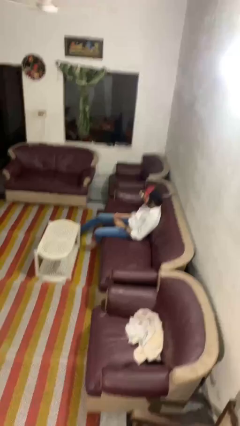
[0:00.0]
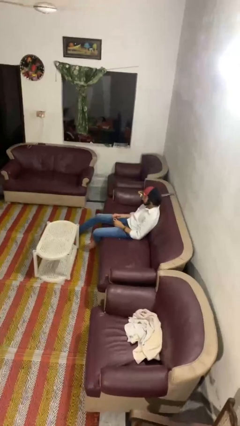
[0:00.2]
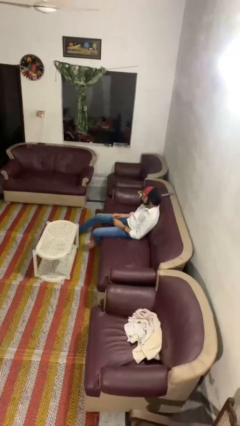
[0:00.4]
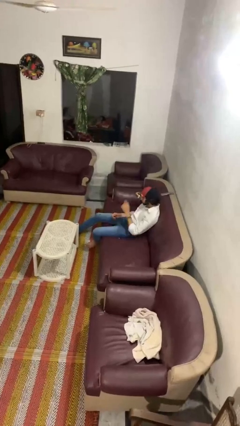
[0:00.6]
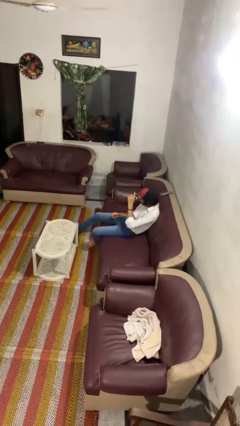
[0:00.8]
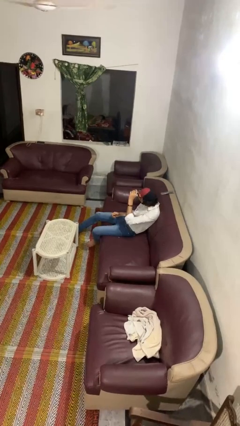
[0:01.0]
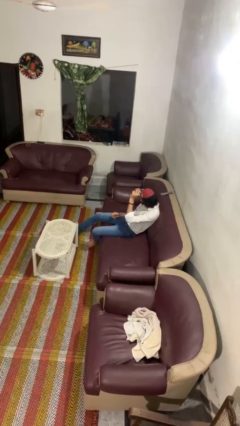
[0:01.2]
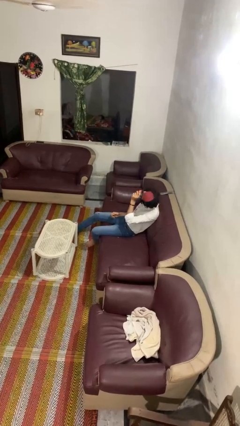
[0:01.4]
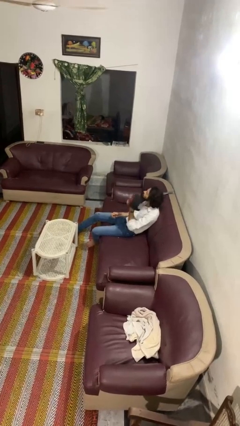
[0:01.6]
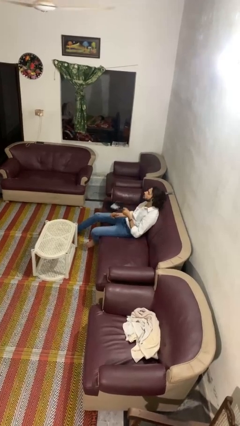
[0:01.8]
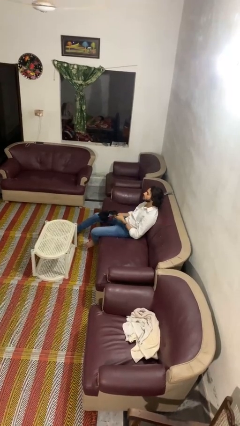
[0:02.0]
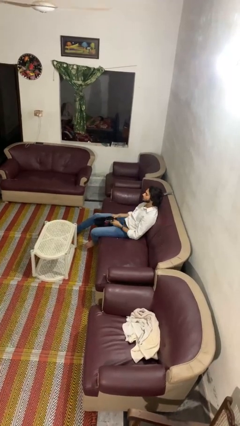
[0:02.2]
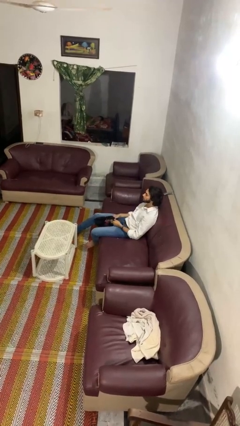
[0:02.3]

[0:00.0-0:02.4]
person takes off hat

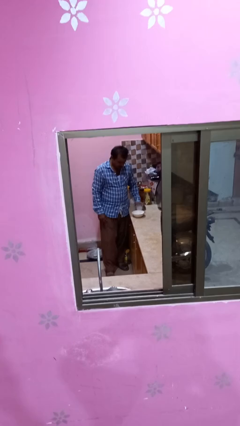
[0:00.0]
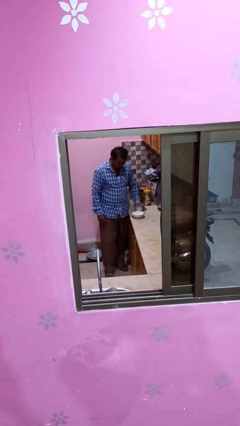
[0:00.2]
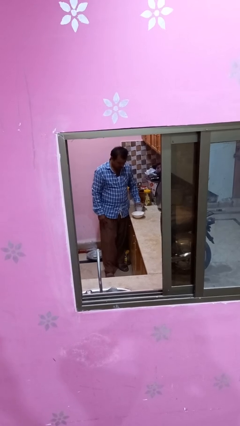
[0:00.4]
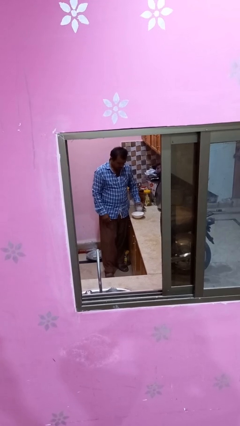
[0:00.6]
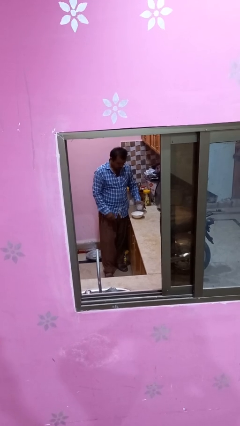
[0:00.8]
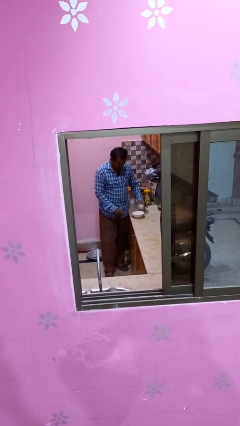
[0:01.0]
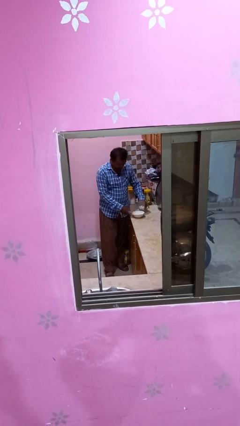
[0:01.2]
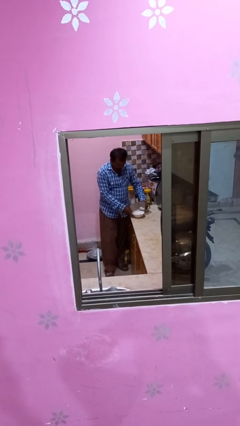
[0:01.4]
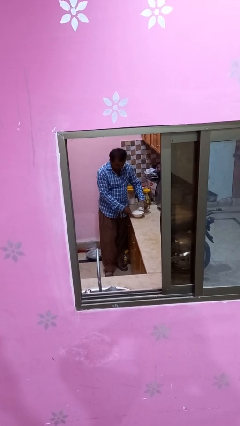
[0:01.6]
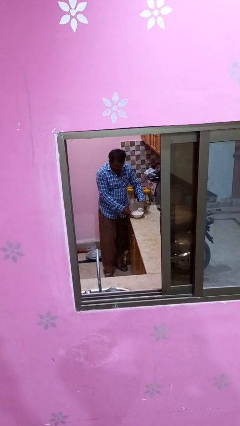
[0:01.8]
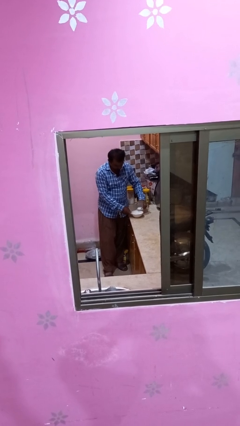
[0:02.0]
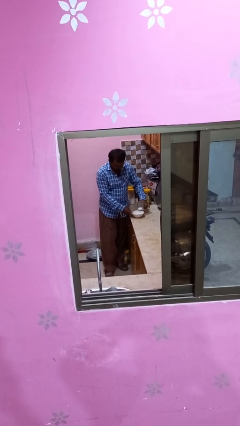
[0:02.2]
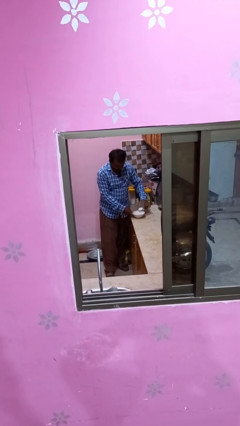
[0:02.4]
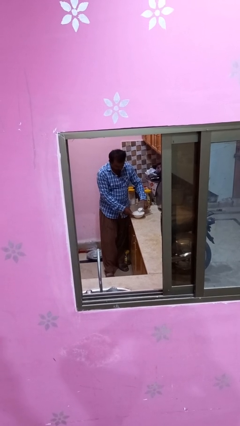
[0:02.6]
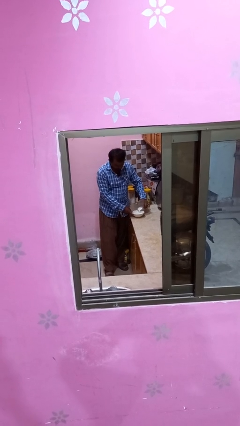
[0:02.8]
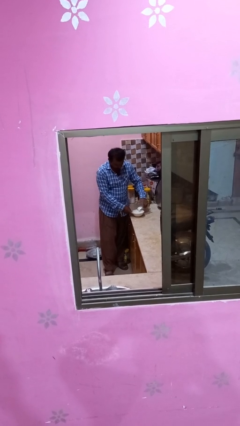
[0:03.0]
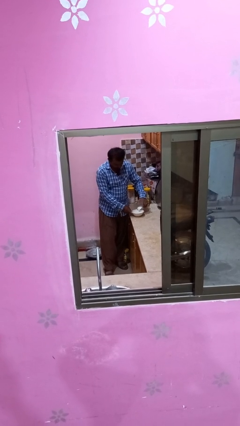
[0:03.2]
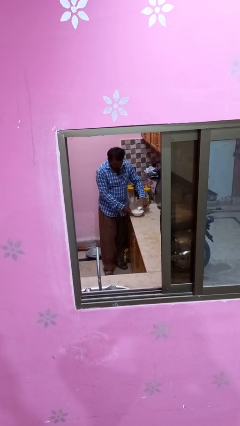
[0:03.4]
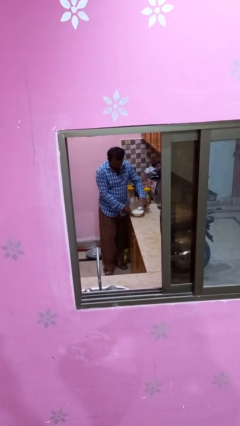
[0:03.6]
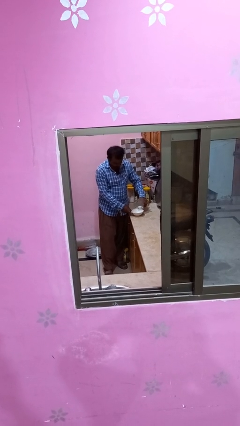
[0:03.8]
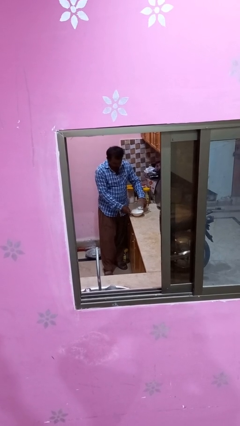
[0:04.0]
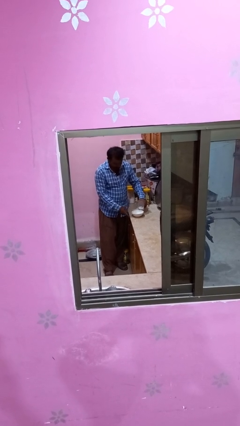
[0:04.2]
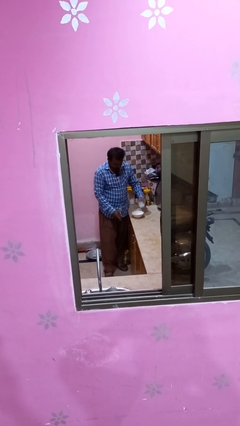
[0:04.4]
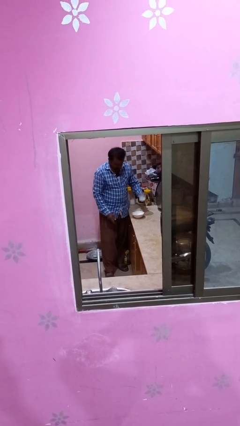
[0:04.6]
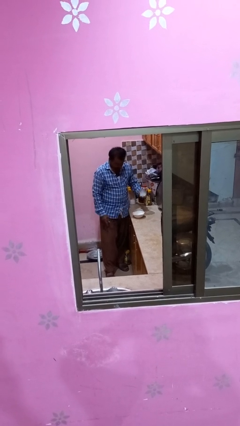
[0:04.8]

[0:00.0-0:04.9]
person pours into bowl

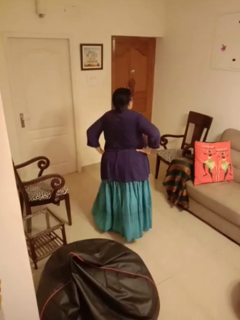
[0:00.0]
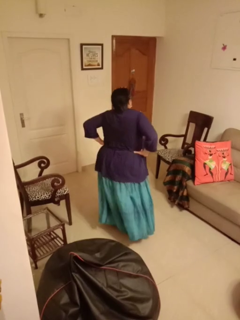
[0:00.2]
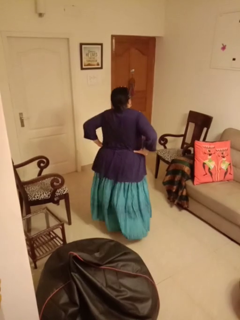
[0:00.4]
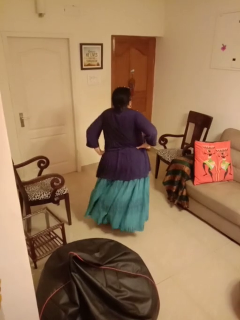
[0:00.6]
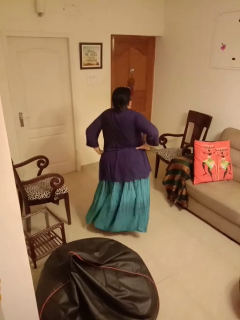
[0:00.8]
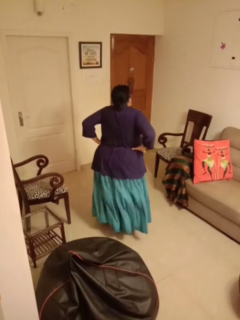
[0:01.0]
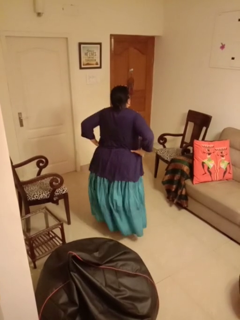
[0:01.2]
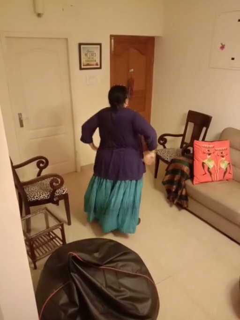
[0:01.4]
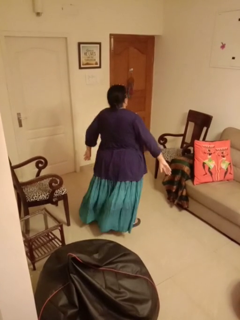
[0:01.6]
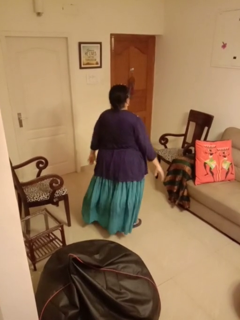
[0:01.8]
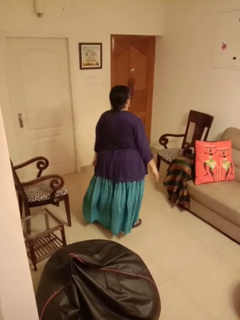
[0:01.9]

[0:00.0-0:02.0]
person wiggles hips

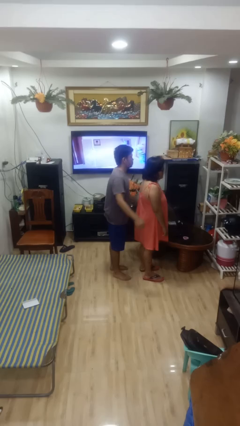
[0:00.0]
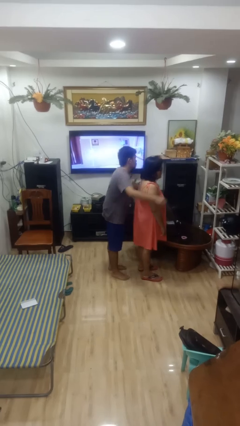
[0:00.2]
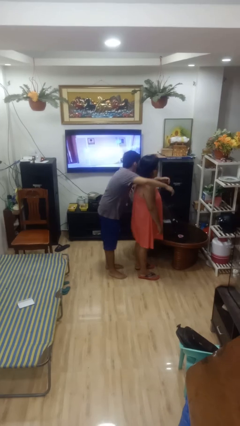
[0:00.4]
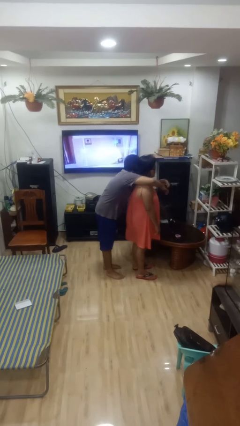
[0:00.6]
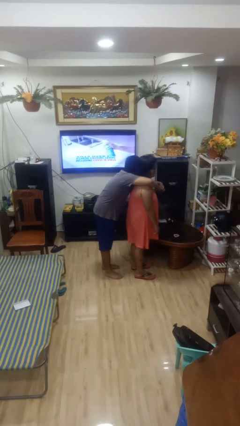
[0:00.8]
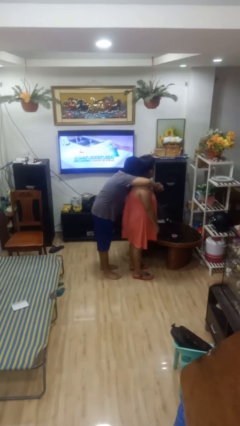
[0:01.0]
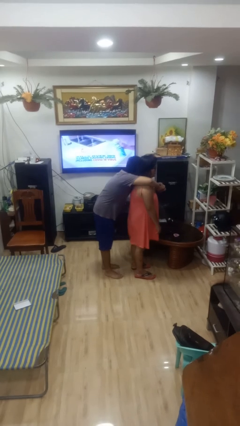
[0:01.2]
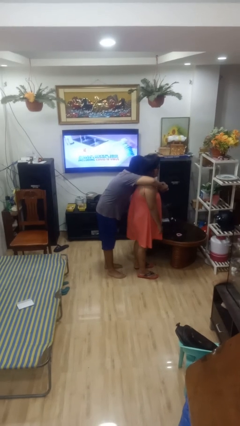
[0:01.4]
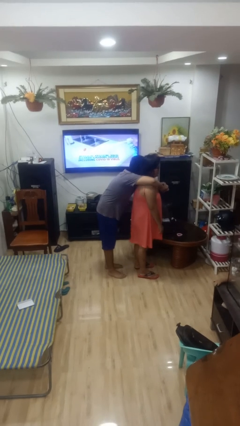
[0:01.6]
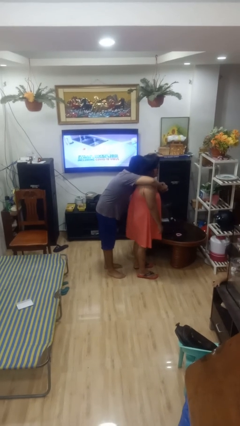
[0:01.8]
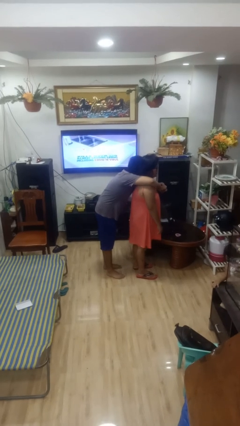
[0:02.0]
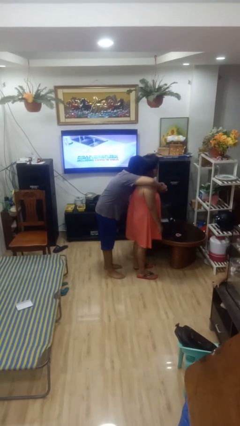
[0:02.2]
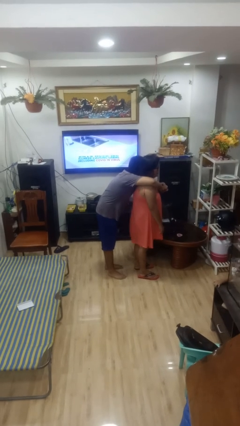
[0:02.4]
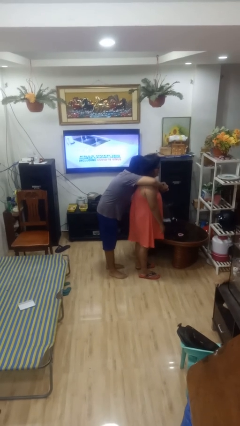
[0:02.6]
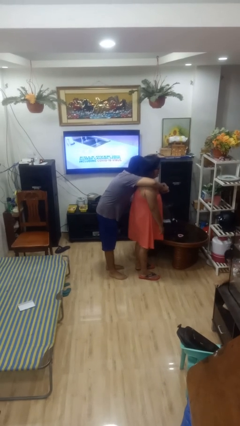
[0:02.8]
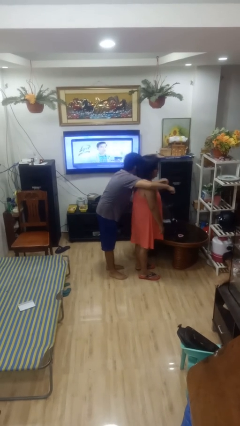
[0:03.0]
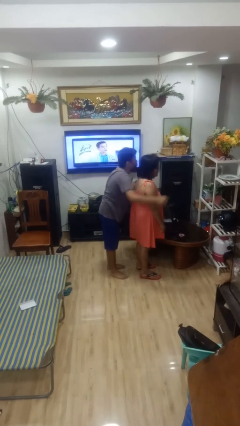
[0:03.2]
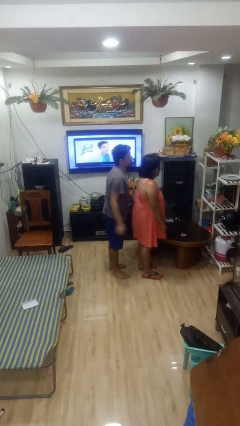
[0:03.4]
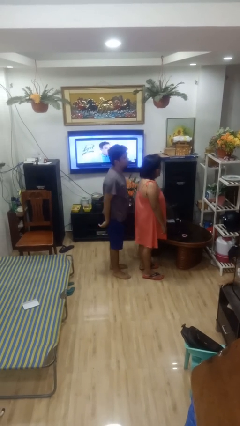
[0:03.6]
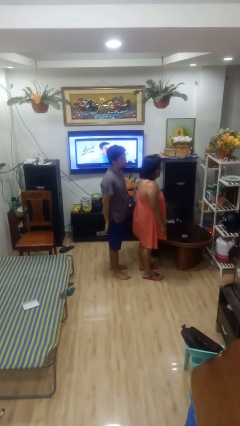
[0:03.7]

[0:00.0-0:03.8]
person hugs person from behind

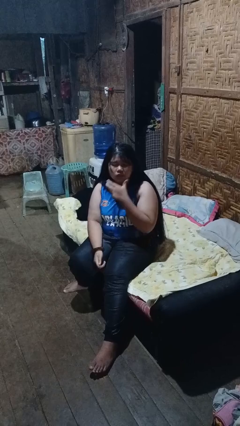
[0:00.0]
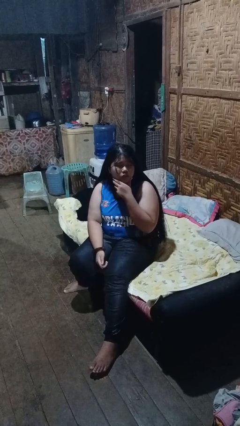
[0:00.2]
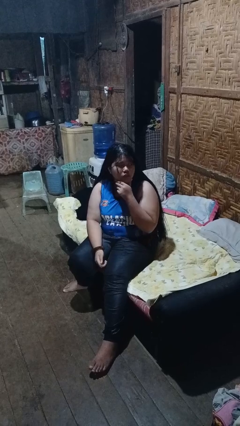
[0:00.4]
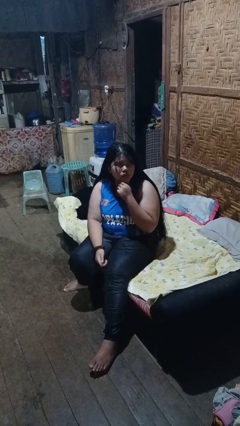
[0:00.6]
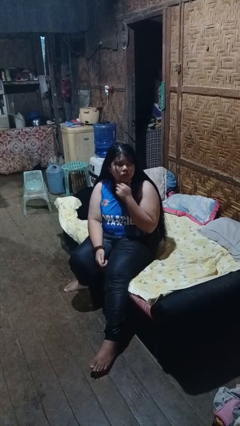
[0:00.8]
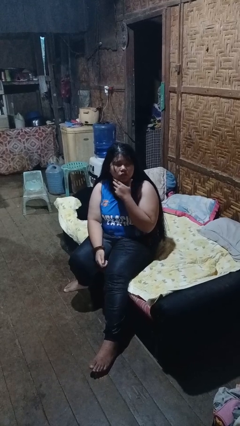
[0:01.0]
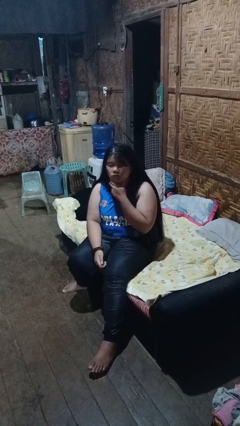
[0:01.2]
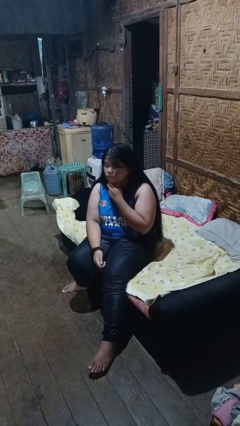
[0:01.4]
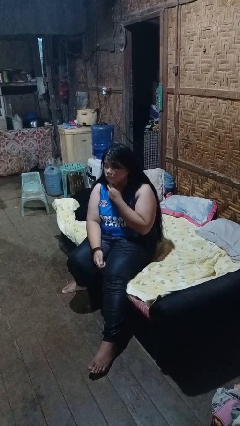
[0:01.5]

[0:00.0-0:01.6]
person strokes chin

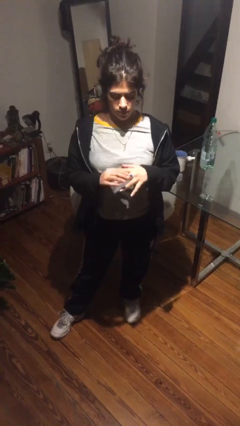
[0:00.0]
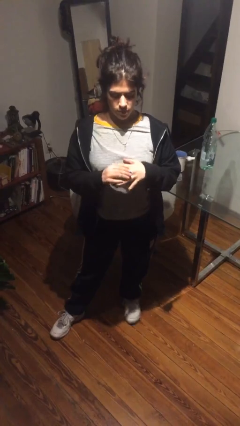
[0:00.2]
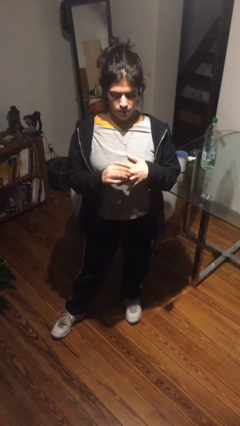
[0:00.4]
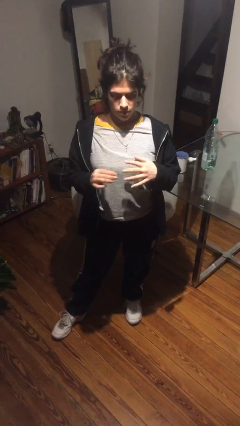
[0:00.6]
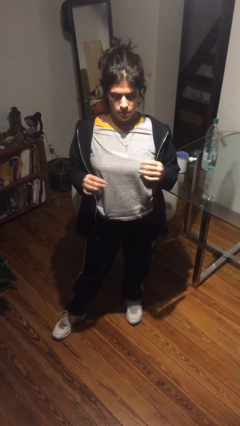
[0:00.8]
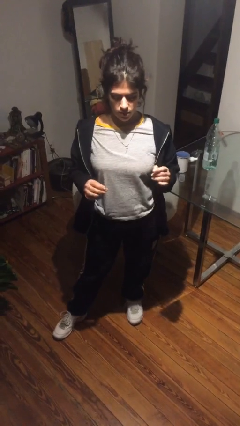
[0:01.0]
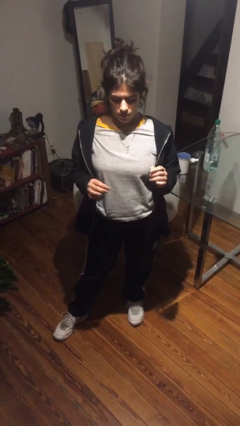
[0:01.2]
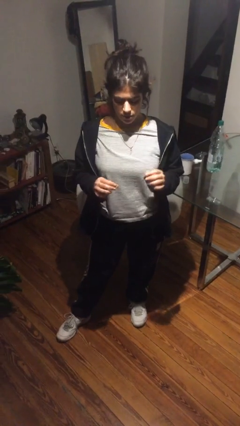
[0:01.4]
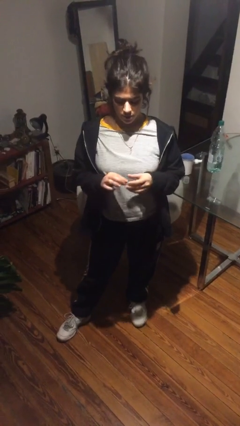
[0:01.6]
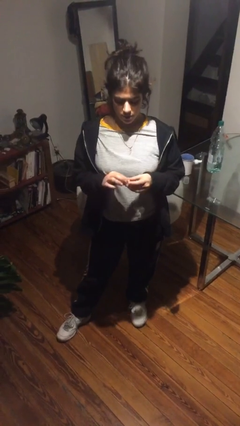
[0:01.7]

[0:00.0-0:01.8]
person takes off ring

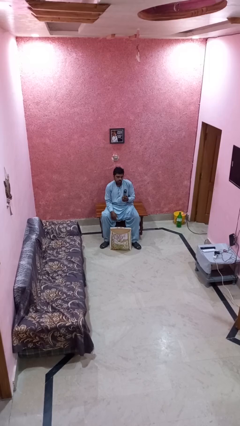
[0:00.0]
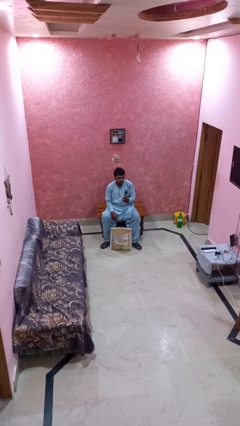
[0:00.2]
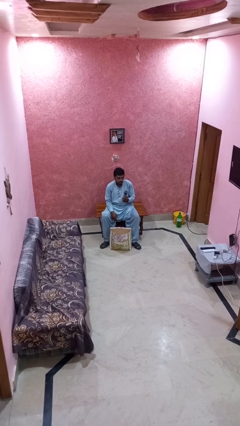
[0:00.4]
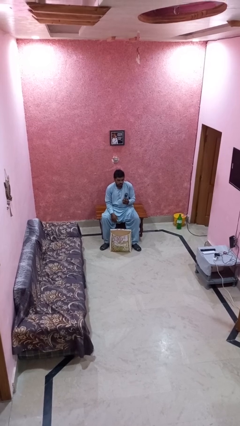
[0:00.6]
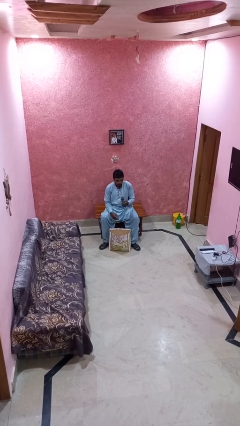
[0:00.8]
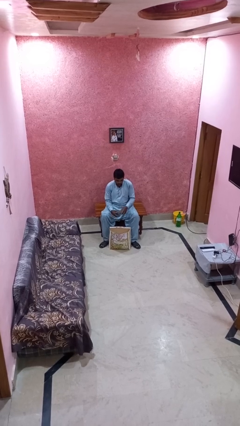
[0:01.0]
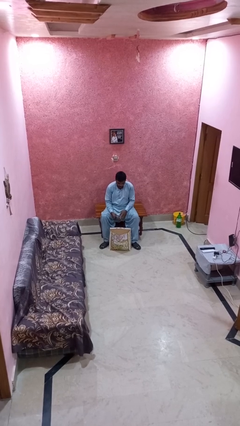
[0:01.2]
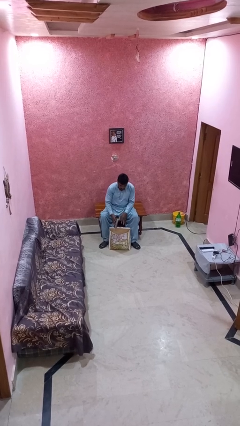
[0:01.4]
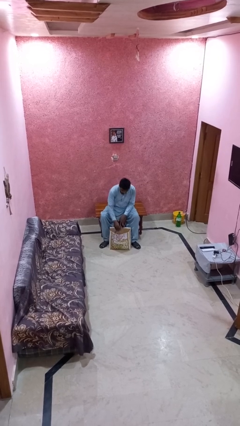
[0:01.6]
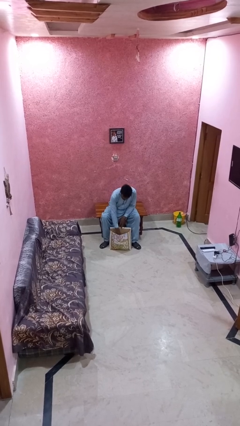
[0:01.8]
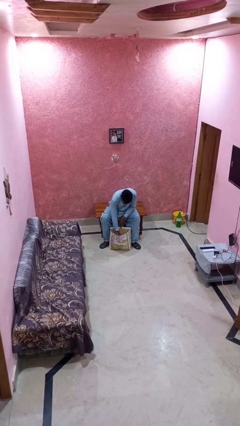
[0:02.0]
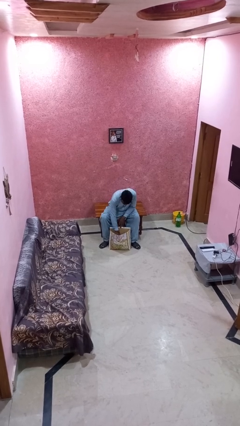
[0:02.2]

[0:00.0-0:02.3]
person puts object into bag
